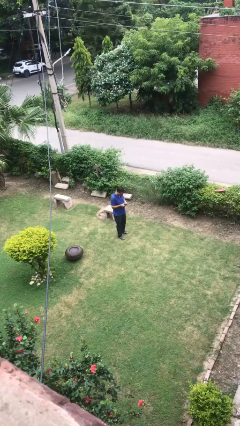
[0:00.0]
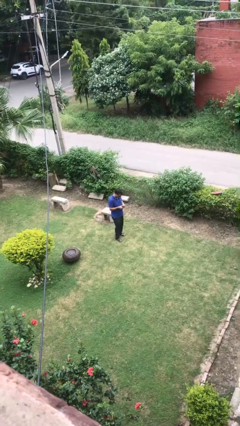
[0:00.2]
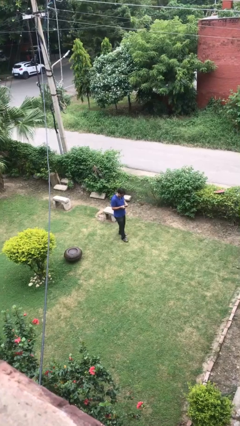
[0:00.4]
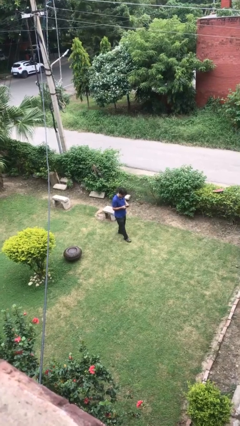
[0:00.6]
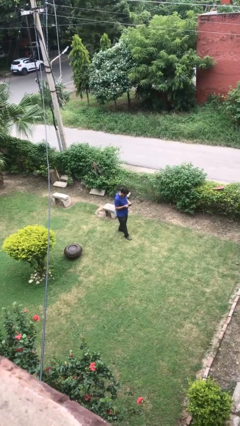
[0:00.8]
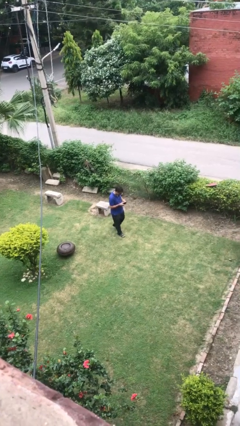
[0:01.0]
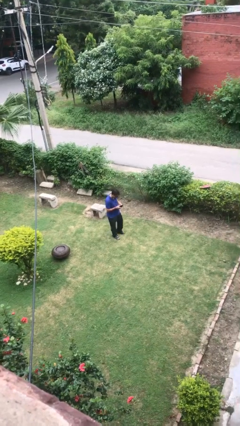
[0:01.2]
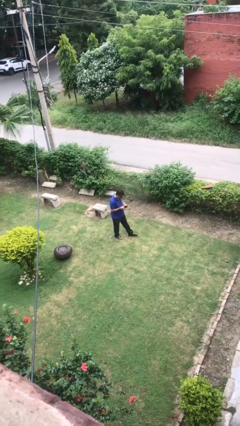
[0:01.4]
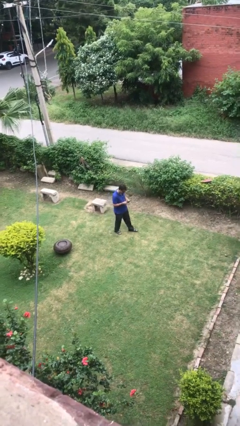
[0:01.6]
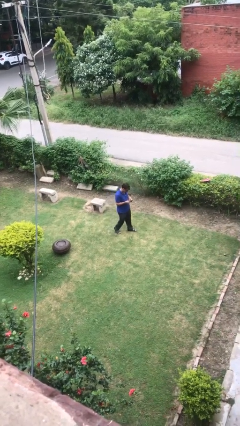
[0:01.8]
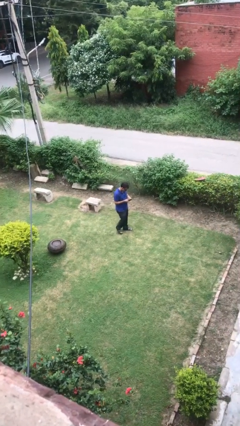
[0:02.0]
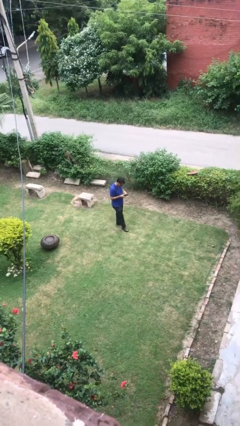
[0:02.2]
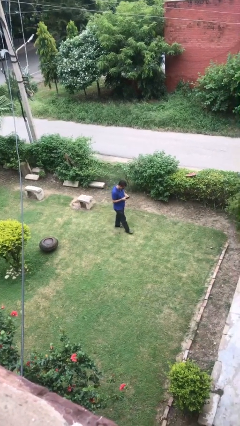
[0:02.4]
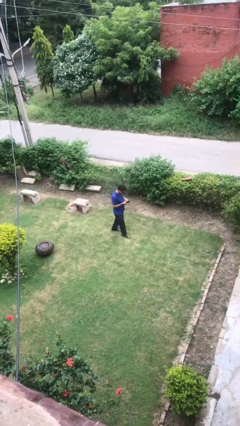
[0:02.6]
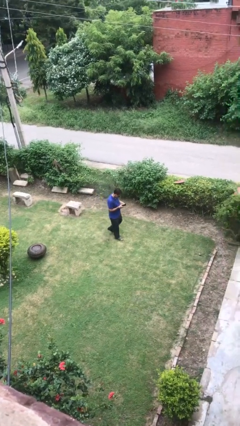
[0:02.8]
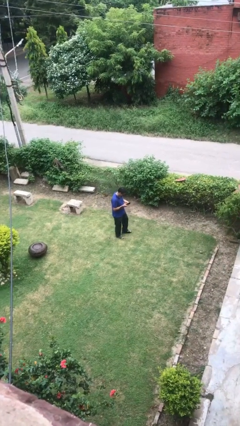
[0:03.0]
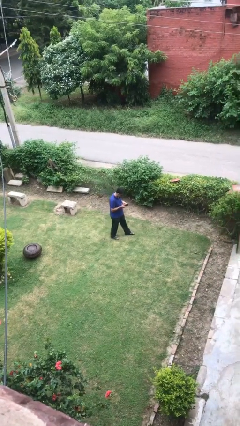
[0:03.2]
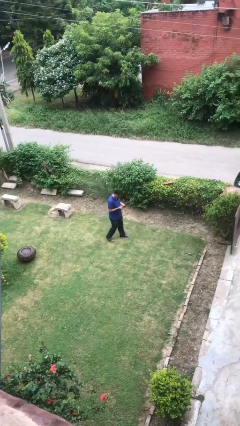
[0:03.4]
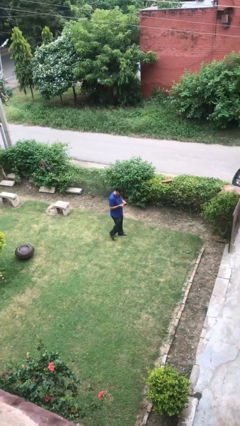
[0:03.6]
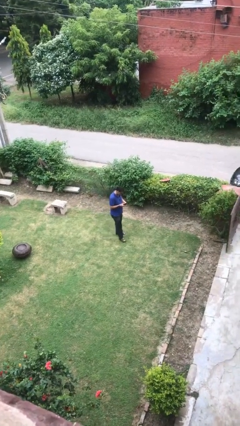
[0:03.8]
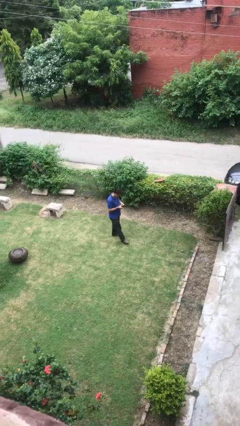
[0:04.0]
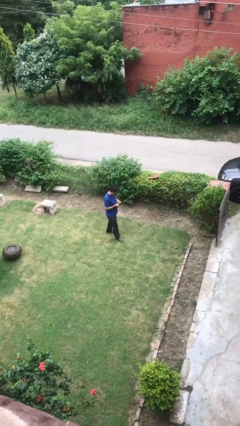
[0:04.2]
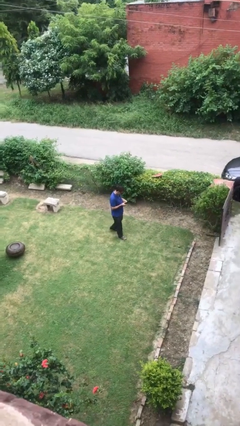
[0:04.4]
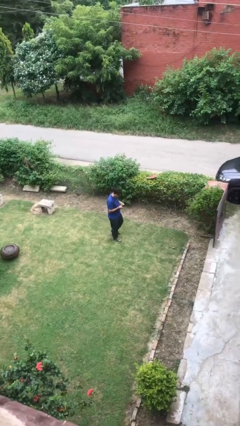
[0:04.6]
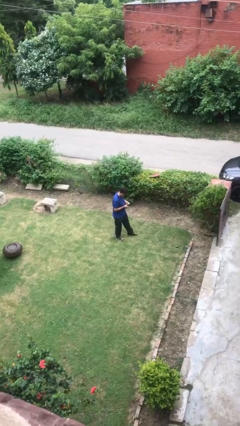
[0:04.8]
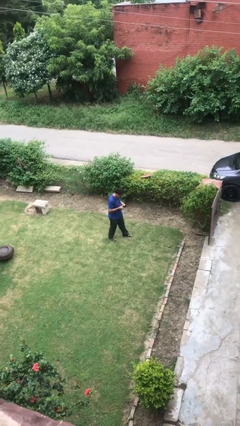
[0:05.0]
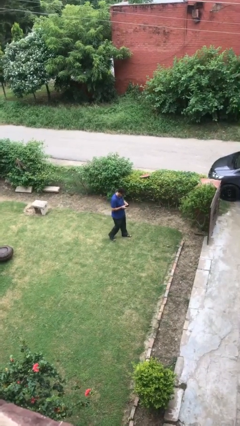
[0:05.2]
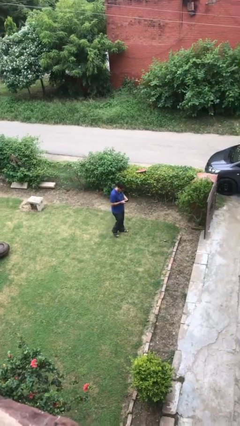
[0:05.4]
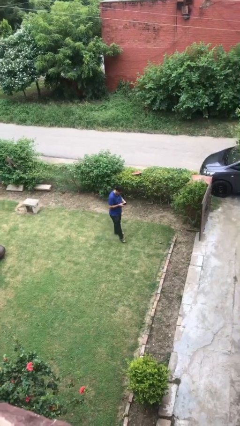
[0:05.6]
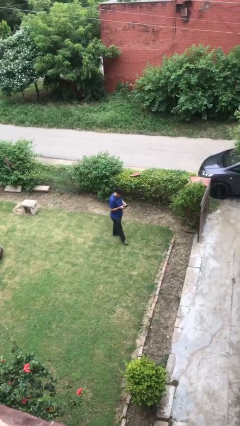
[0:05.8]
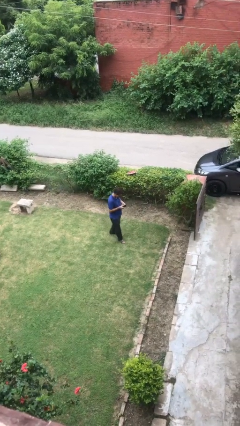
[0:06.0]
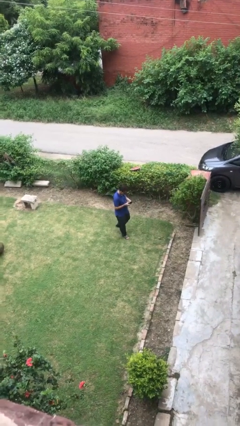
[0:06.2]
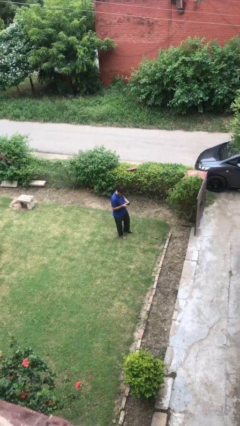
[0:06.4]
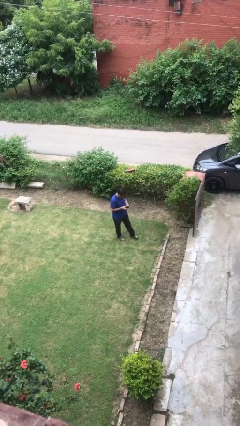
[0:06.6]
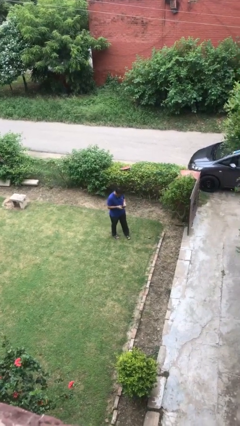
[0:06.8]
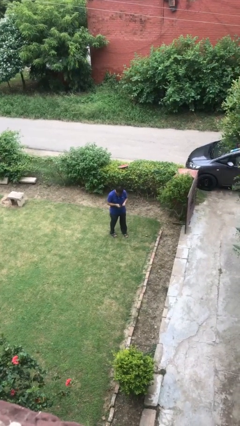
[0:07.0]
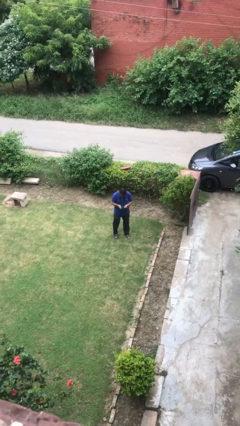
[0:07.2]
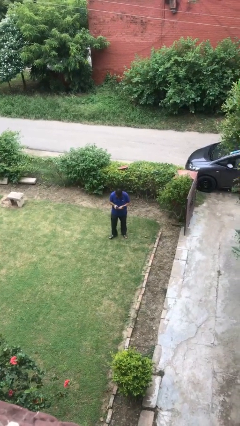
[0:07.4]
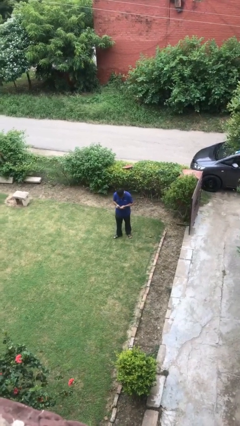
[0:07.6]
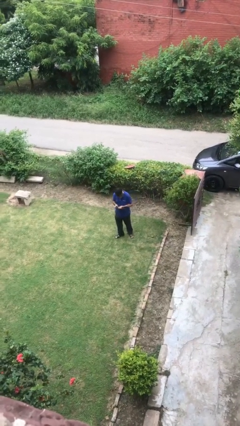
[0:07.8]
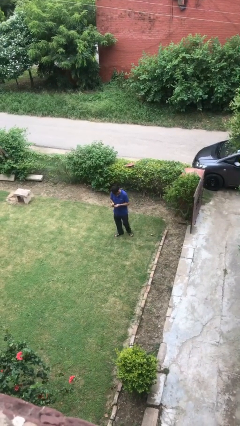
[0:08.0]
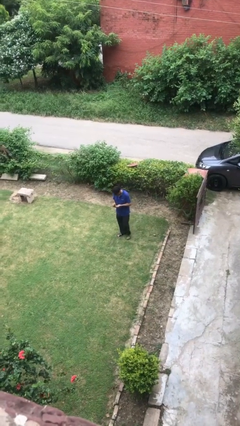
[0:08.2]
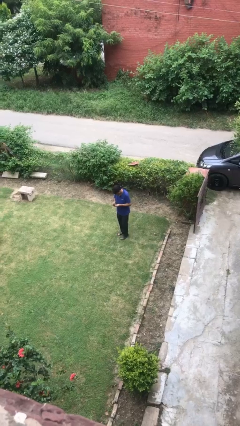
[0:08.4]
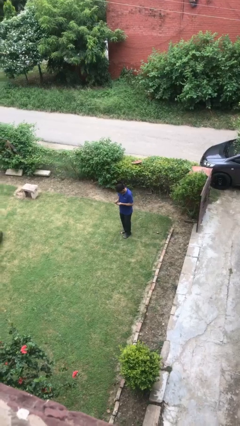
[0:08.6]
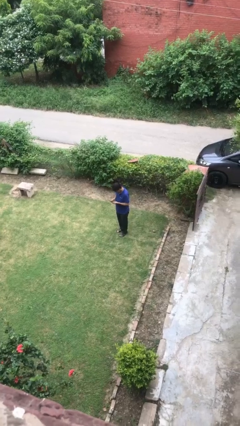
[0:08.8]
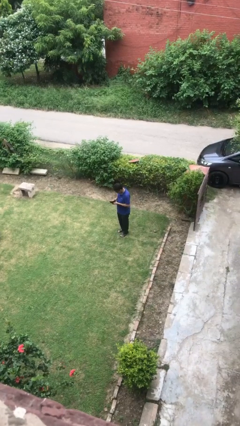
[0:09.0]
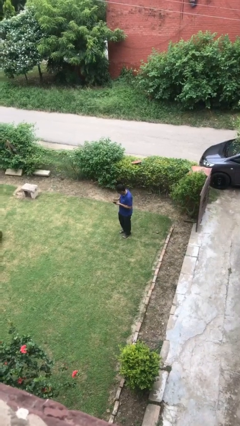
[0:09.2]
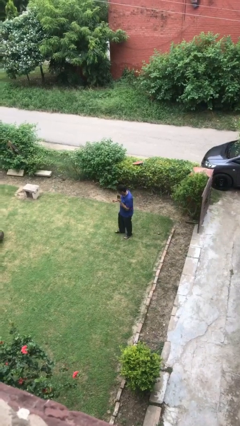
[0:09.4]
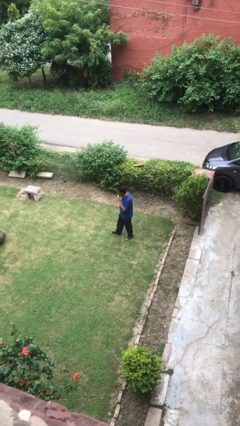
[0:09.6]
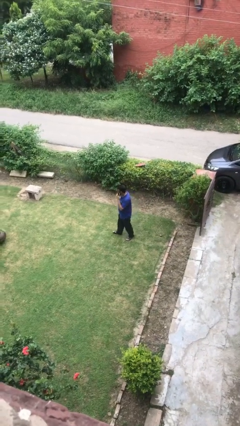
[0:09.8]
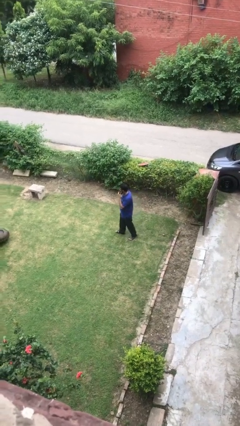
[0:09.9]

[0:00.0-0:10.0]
person texts on phone

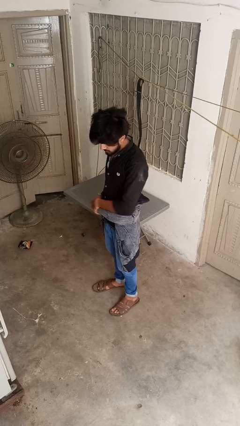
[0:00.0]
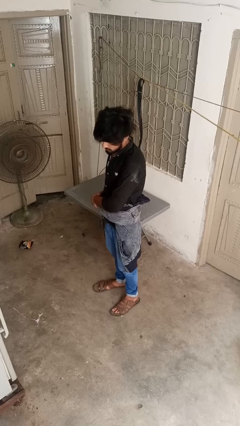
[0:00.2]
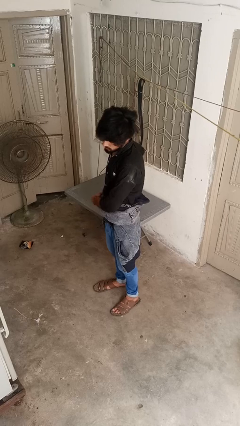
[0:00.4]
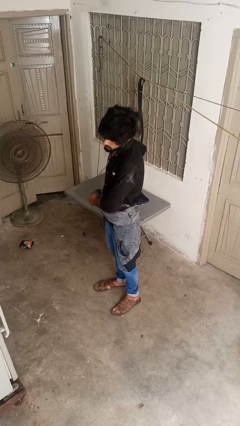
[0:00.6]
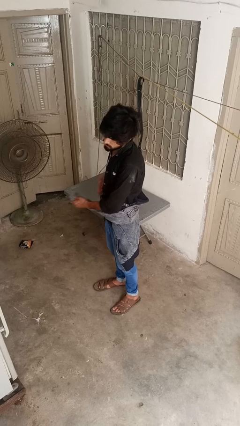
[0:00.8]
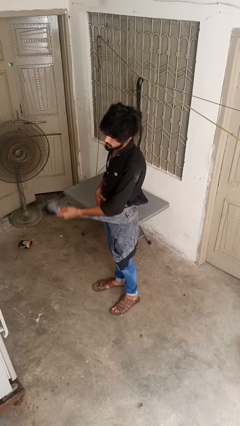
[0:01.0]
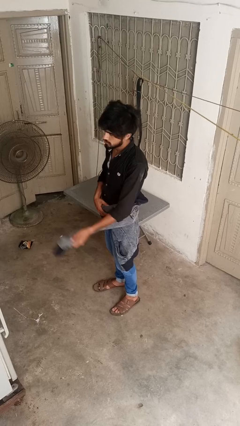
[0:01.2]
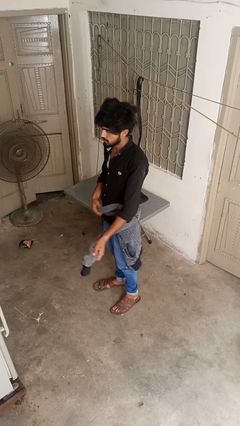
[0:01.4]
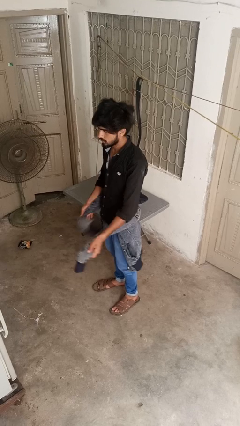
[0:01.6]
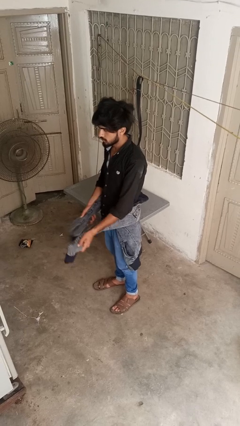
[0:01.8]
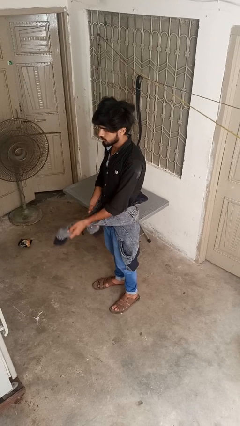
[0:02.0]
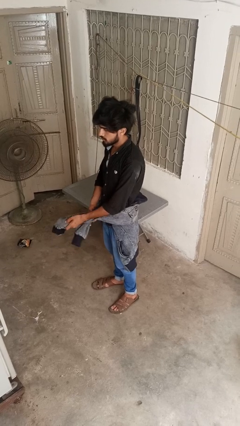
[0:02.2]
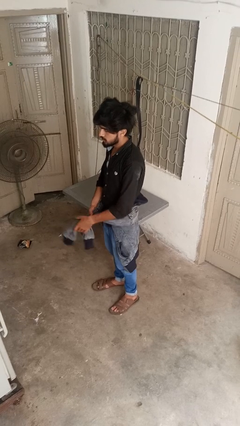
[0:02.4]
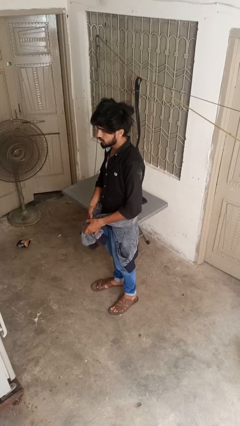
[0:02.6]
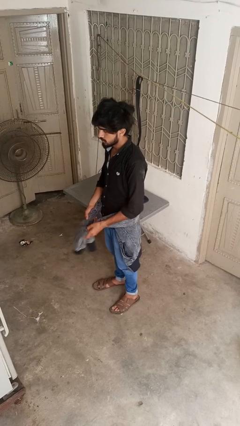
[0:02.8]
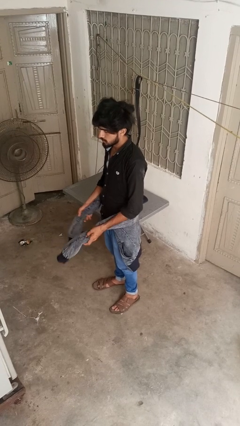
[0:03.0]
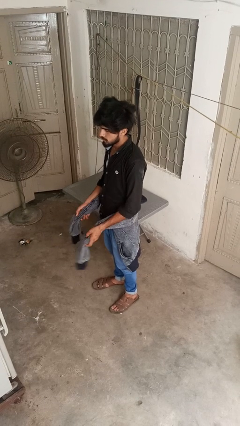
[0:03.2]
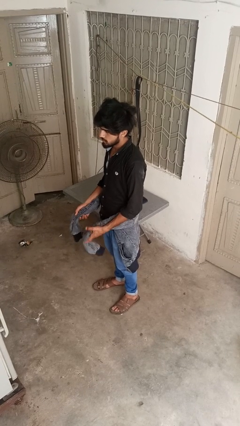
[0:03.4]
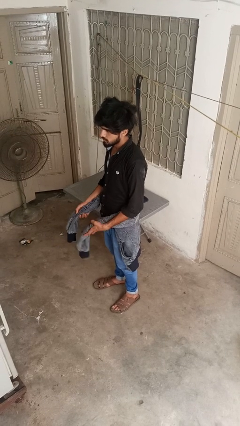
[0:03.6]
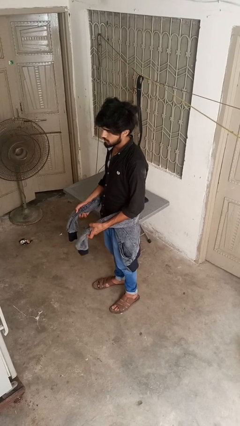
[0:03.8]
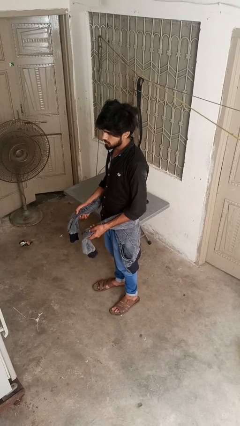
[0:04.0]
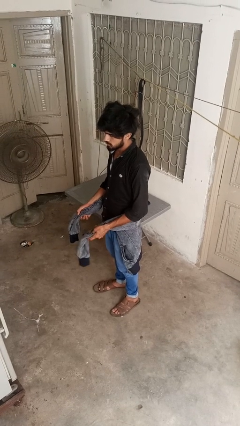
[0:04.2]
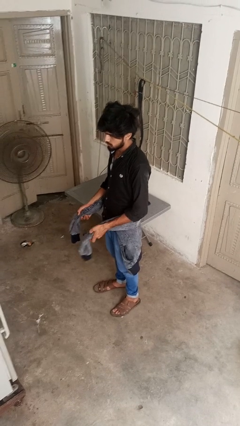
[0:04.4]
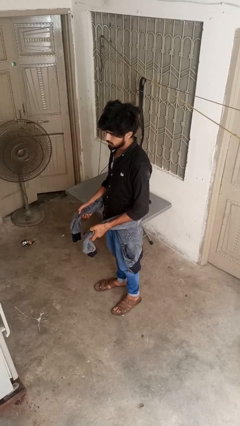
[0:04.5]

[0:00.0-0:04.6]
person unties jacket around waist

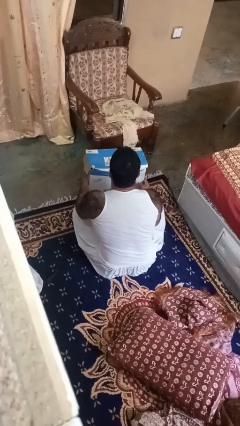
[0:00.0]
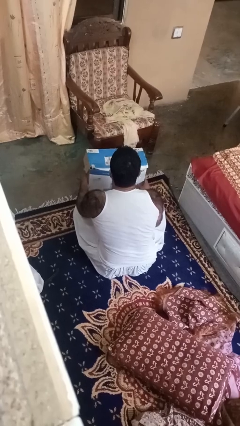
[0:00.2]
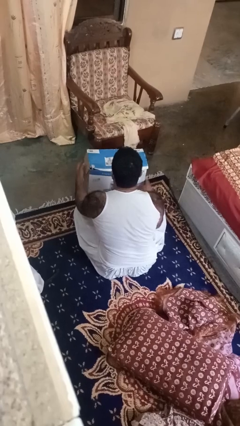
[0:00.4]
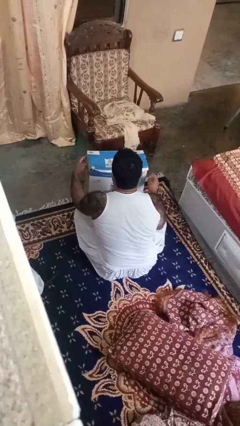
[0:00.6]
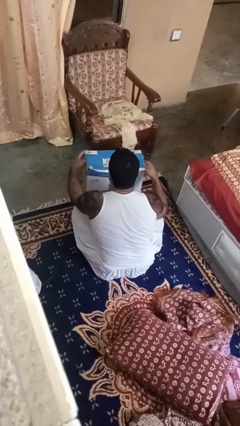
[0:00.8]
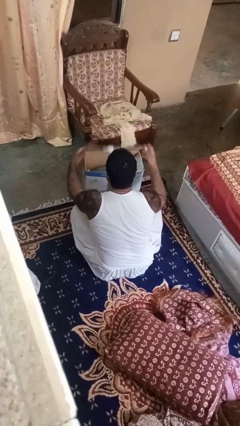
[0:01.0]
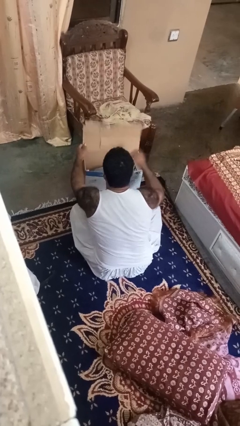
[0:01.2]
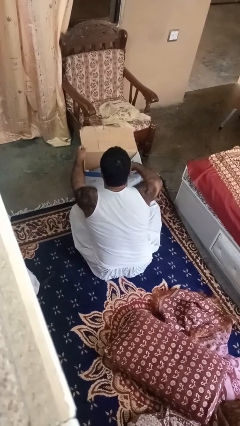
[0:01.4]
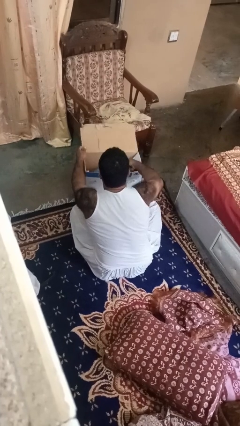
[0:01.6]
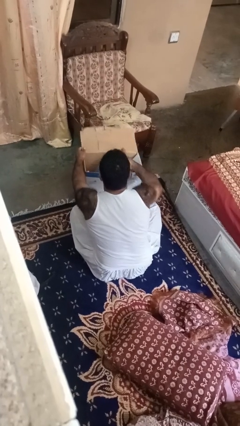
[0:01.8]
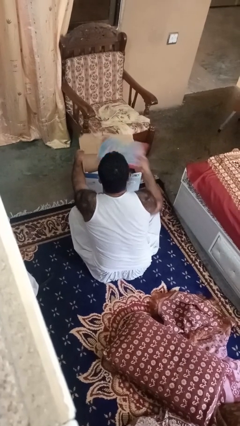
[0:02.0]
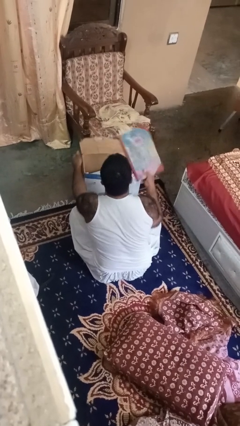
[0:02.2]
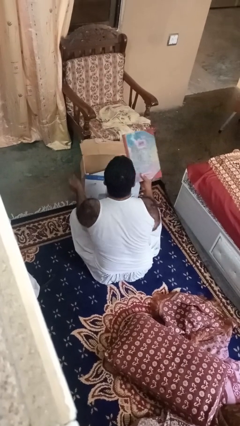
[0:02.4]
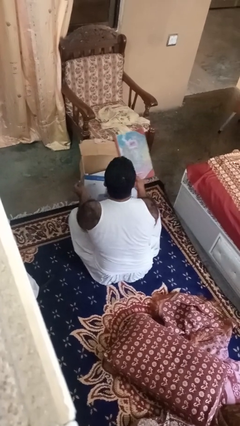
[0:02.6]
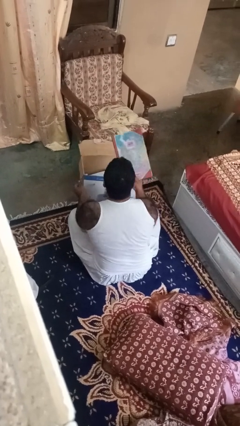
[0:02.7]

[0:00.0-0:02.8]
person takes object from box

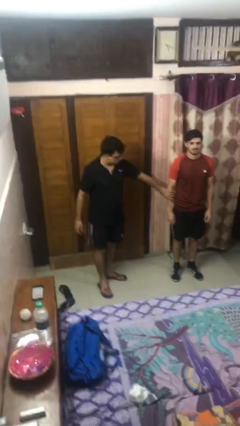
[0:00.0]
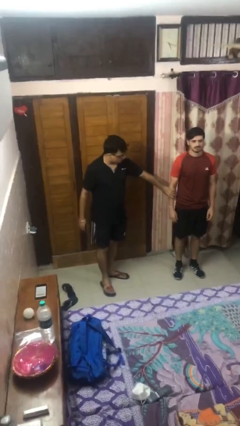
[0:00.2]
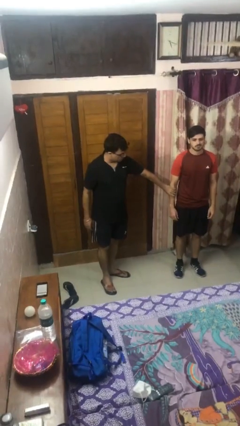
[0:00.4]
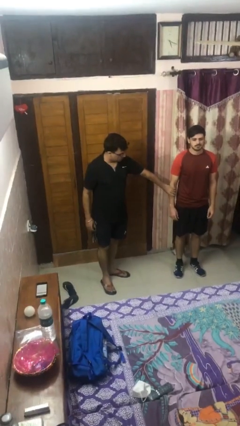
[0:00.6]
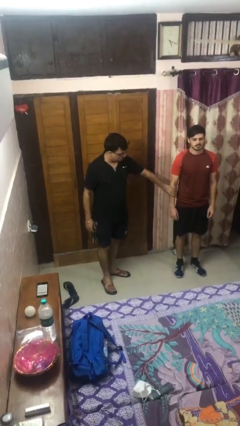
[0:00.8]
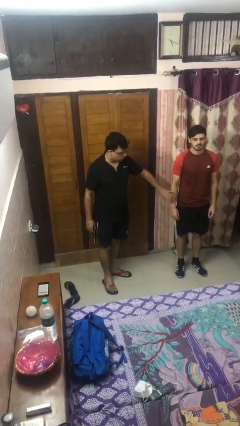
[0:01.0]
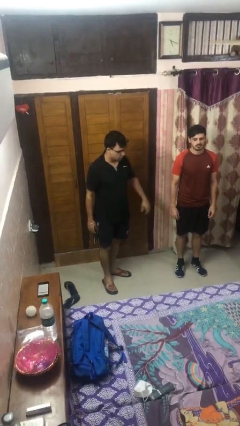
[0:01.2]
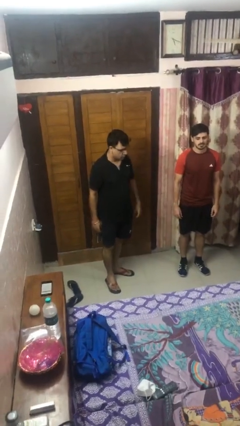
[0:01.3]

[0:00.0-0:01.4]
person grabs person by forearm
